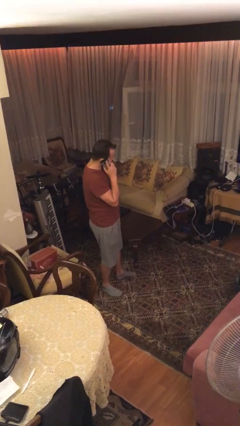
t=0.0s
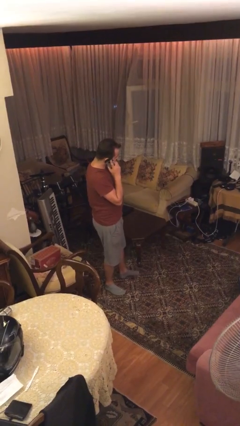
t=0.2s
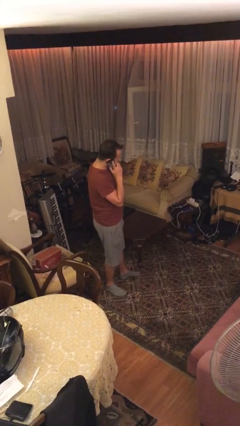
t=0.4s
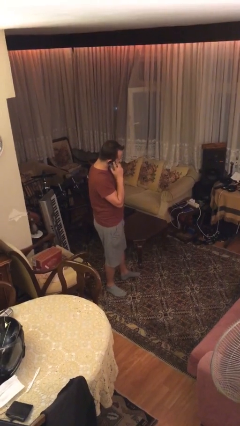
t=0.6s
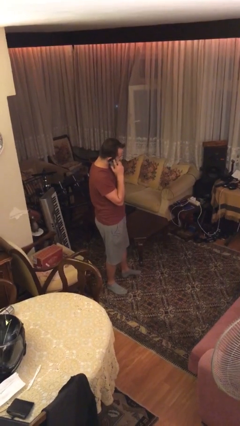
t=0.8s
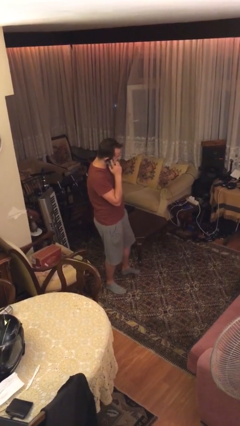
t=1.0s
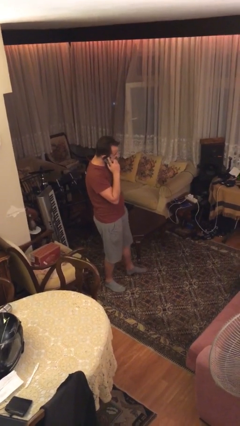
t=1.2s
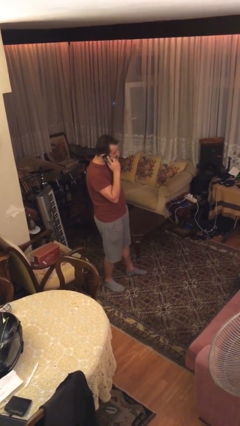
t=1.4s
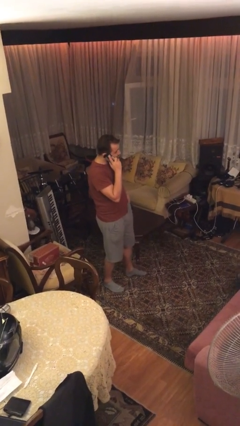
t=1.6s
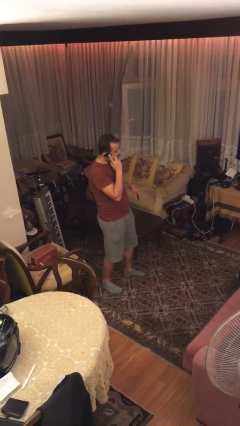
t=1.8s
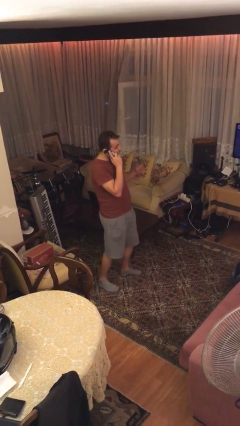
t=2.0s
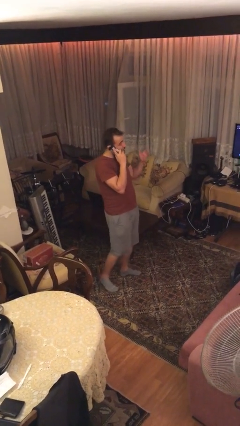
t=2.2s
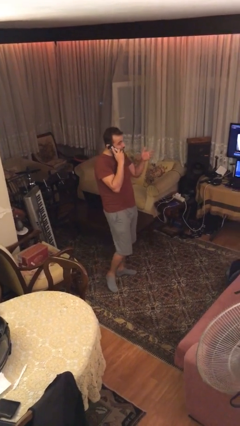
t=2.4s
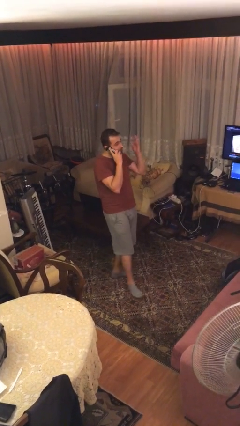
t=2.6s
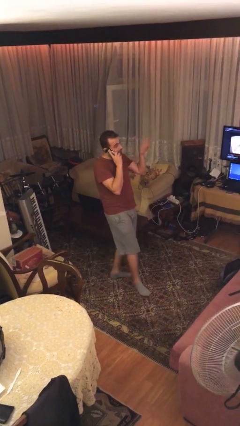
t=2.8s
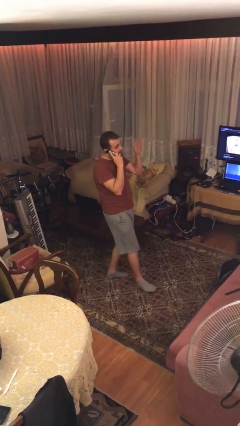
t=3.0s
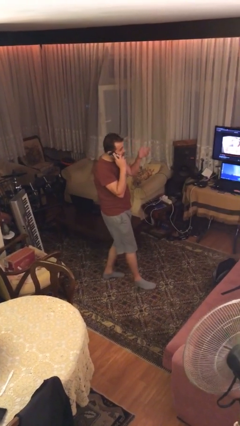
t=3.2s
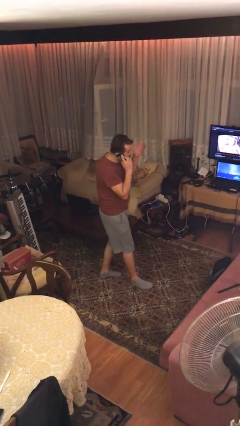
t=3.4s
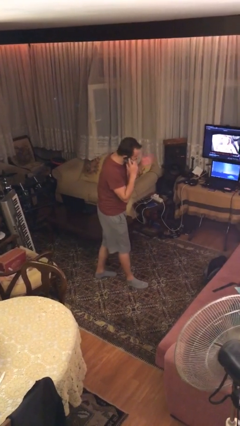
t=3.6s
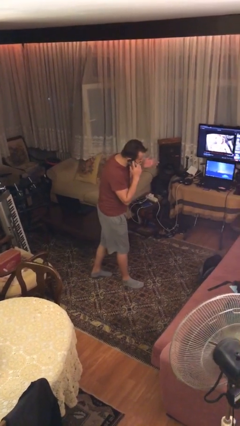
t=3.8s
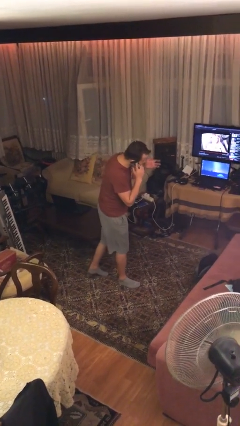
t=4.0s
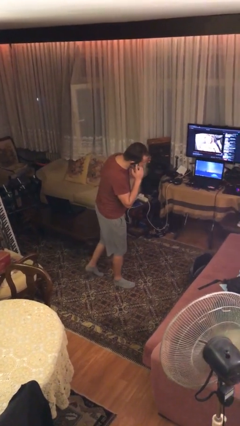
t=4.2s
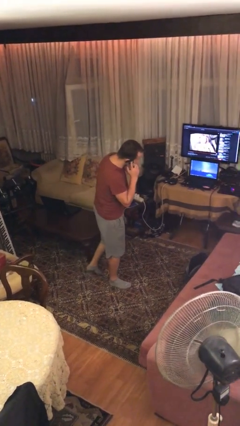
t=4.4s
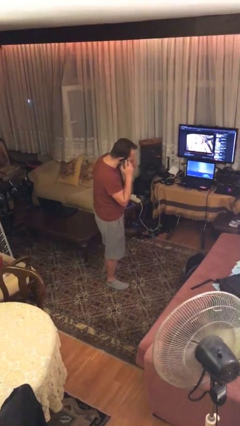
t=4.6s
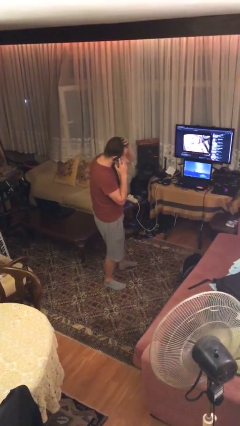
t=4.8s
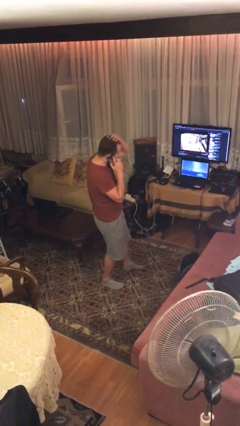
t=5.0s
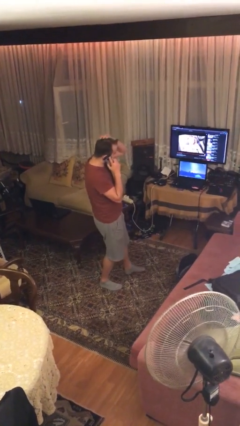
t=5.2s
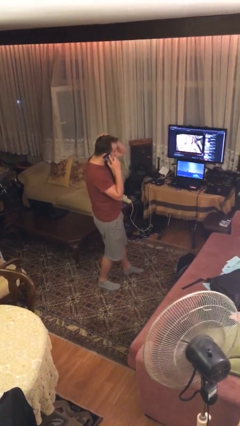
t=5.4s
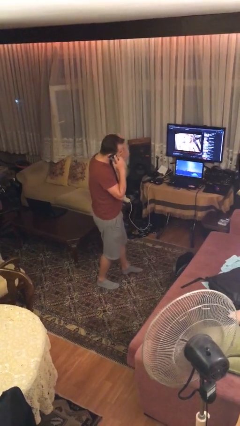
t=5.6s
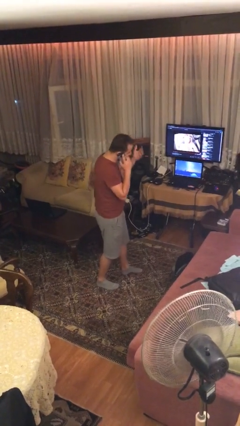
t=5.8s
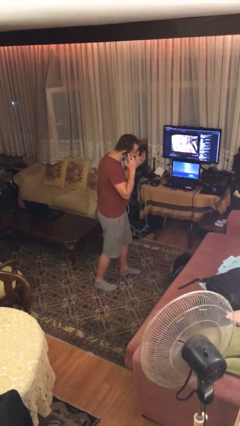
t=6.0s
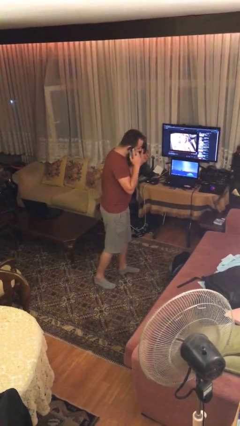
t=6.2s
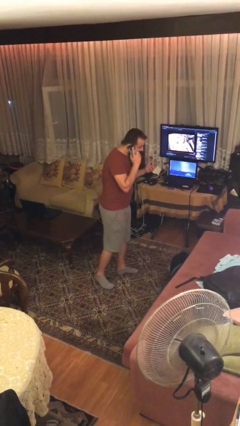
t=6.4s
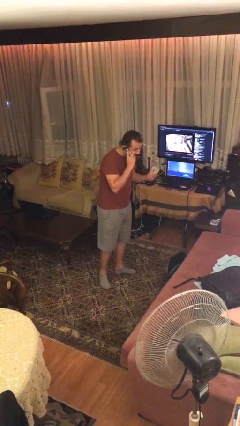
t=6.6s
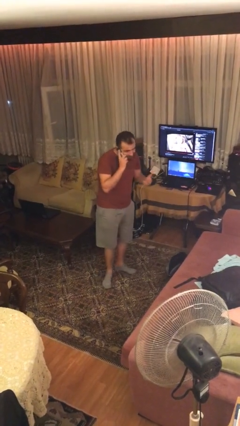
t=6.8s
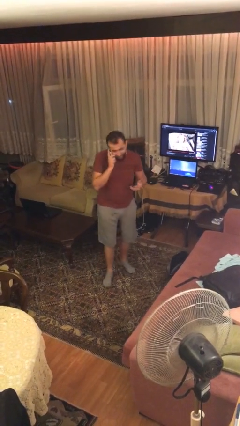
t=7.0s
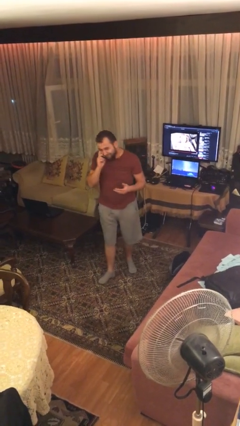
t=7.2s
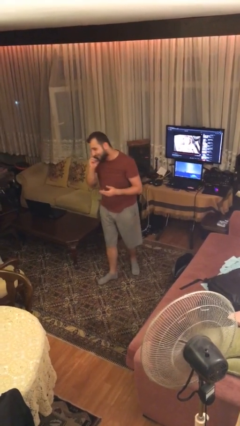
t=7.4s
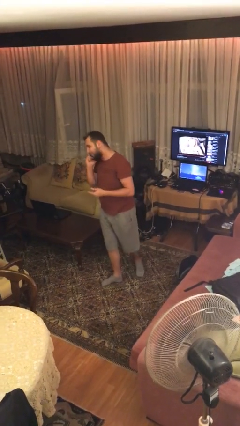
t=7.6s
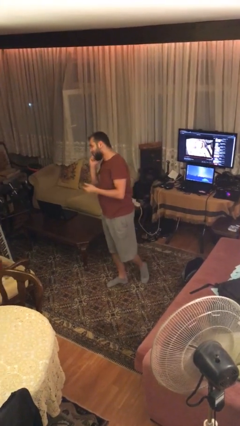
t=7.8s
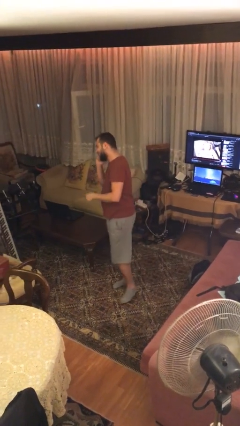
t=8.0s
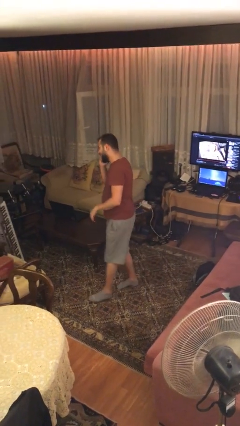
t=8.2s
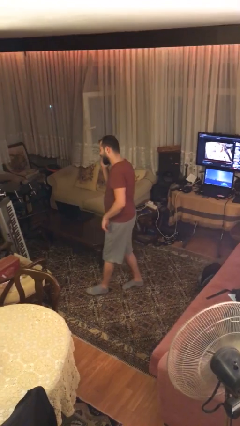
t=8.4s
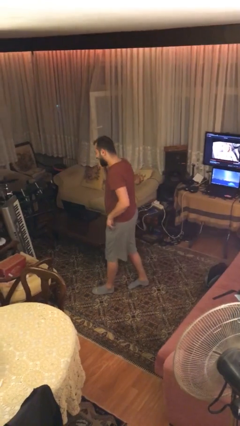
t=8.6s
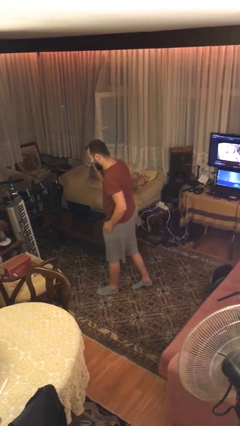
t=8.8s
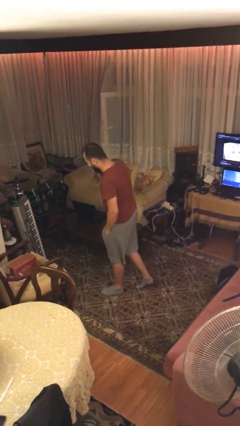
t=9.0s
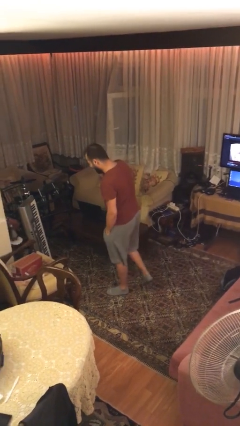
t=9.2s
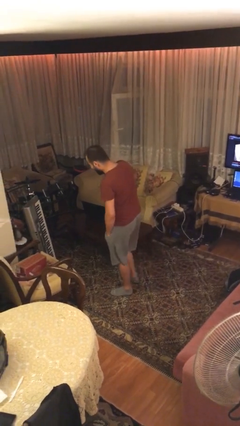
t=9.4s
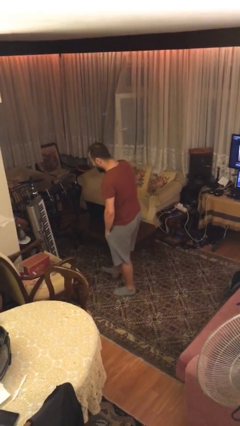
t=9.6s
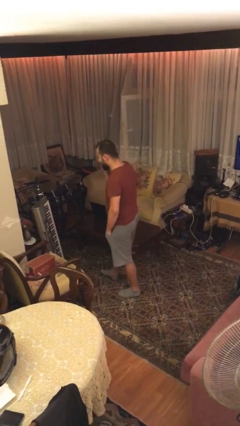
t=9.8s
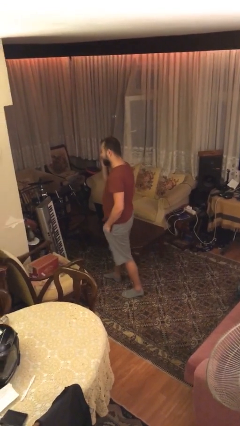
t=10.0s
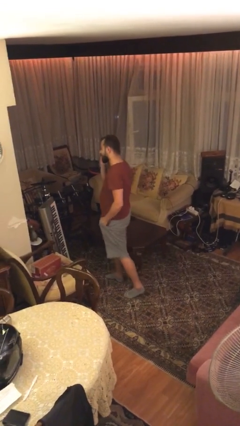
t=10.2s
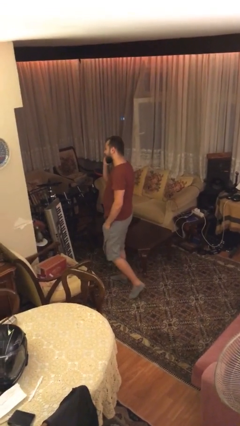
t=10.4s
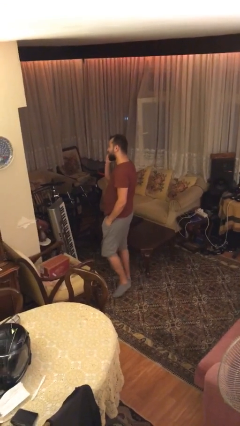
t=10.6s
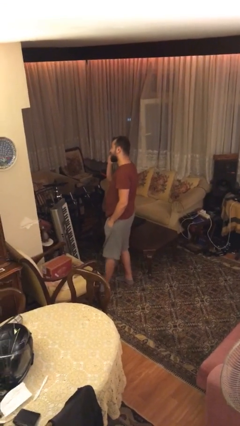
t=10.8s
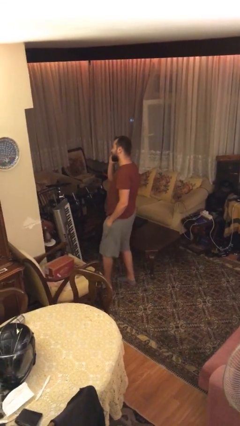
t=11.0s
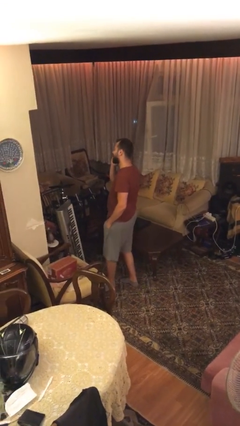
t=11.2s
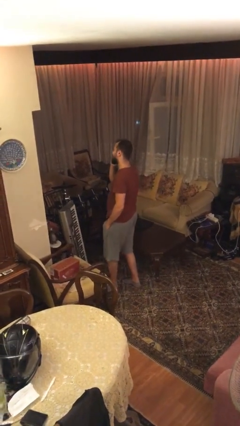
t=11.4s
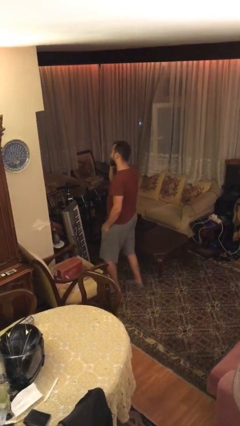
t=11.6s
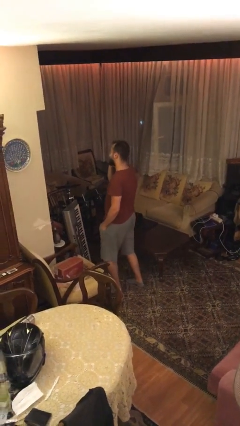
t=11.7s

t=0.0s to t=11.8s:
person talks on phone

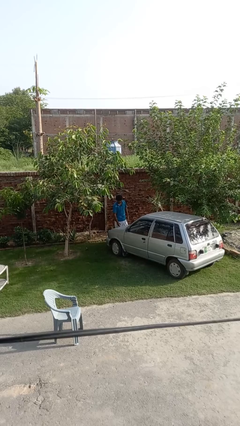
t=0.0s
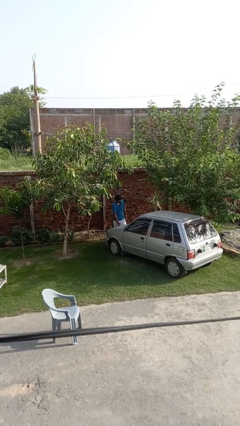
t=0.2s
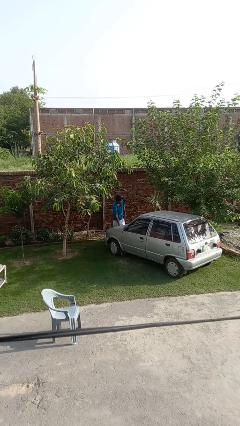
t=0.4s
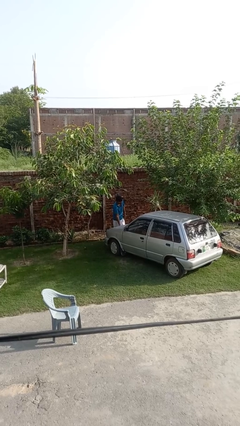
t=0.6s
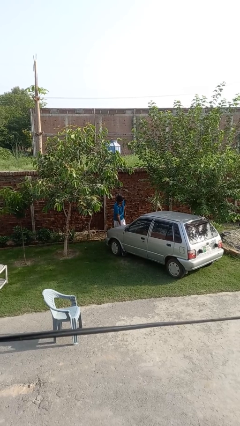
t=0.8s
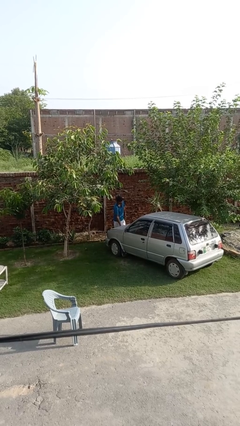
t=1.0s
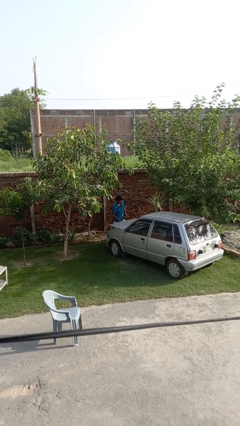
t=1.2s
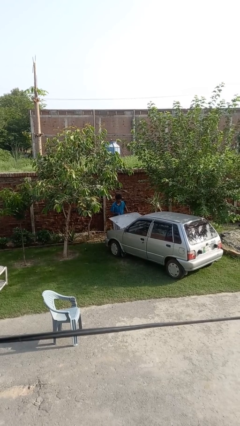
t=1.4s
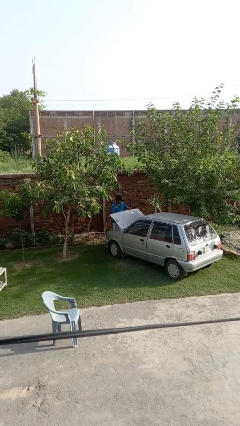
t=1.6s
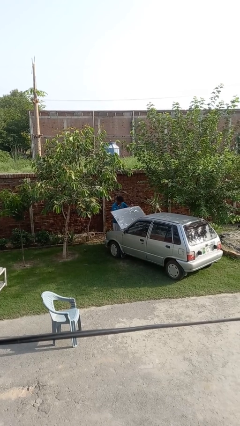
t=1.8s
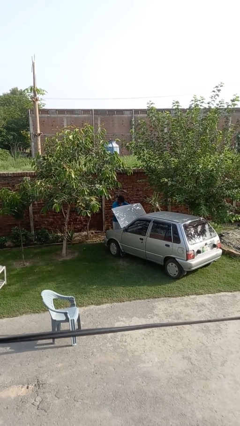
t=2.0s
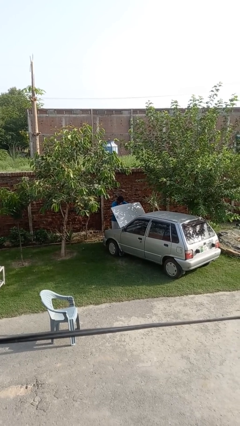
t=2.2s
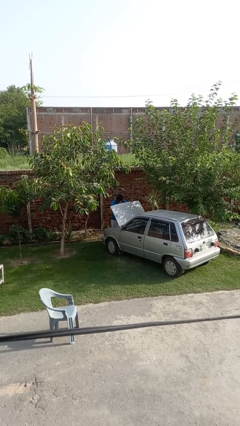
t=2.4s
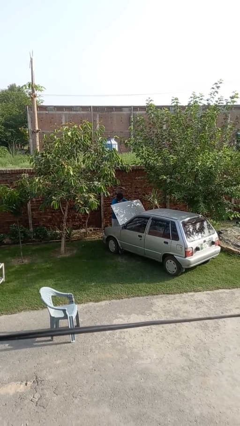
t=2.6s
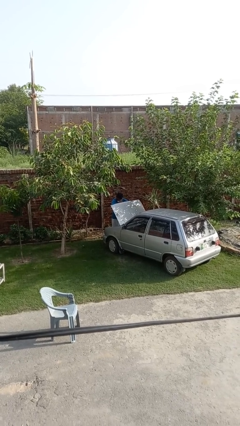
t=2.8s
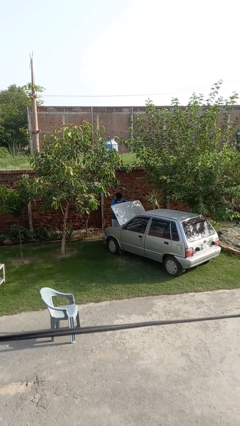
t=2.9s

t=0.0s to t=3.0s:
person opens car hood

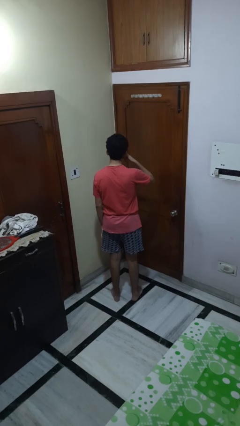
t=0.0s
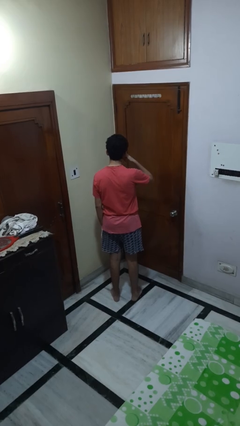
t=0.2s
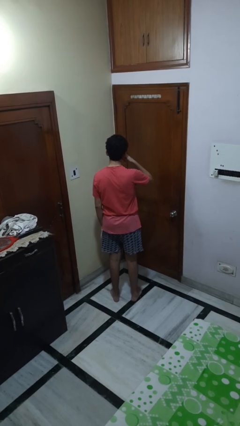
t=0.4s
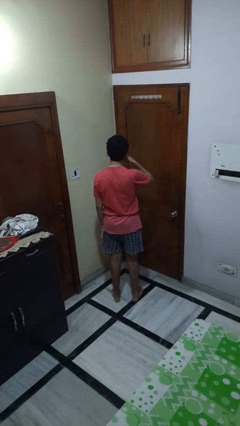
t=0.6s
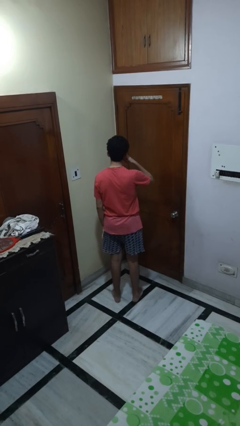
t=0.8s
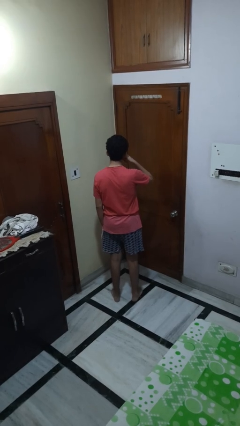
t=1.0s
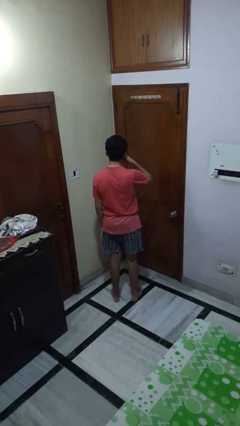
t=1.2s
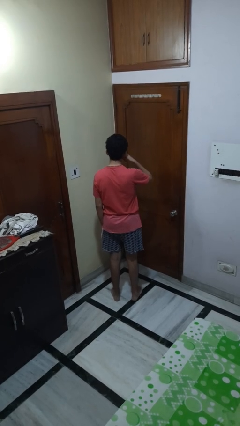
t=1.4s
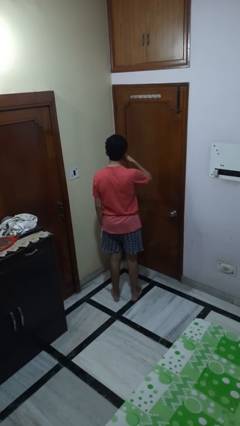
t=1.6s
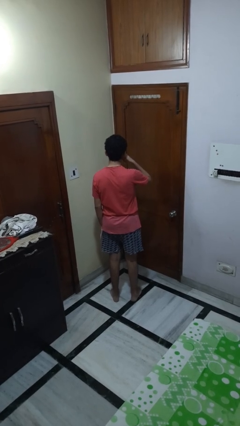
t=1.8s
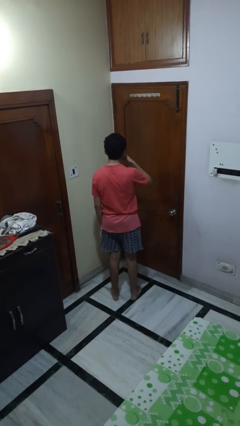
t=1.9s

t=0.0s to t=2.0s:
person gestures call me

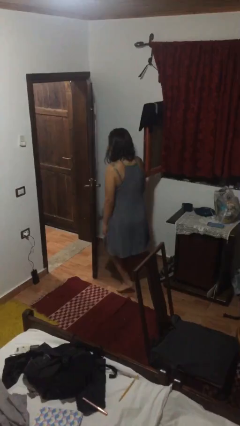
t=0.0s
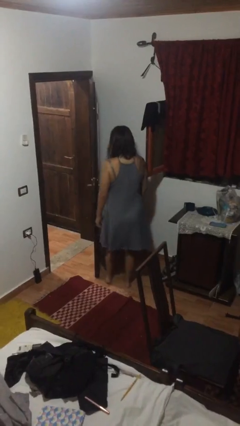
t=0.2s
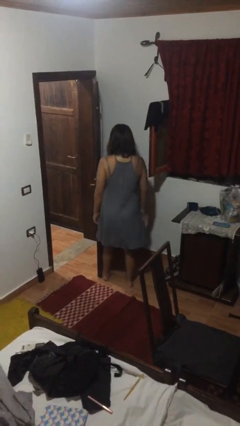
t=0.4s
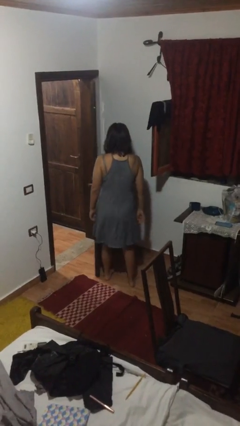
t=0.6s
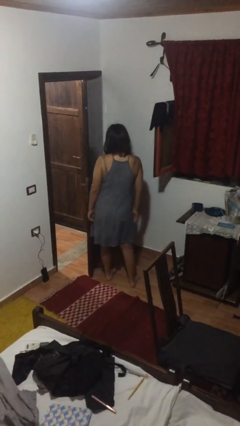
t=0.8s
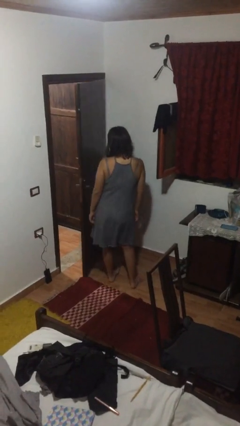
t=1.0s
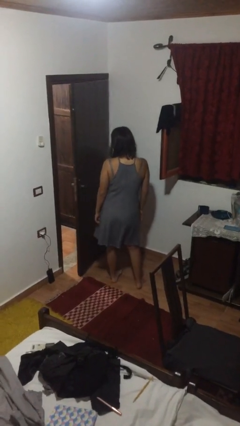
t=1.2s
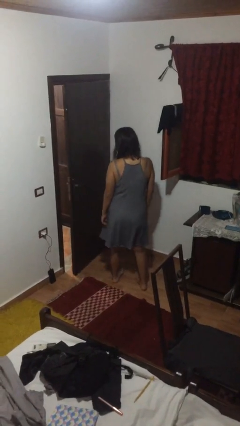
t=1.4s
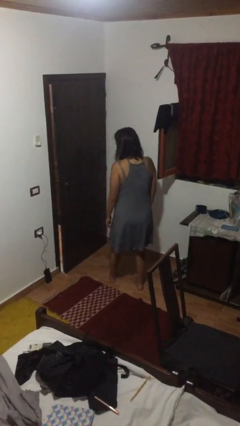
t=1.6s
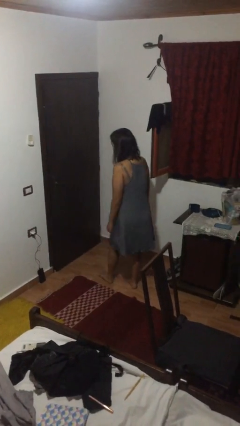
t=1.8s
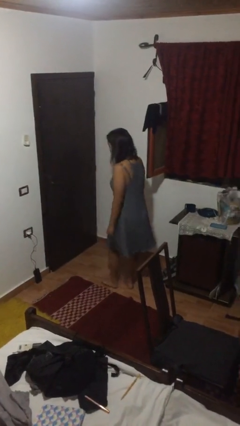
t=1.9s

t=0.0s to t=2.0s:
person closes door with hip
